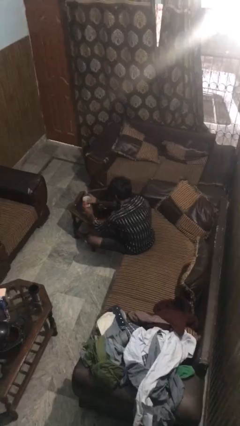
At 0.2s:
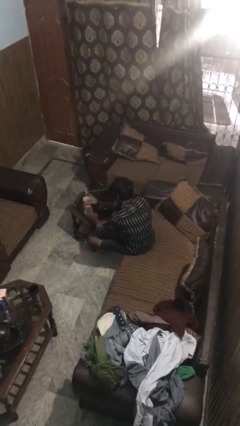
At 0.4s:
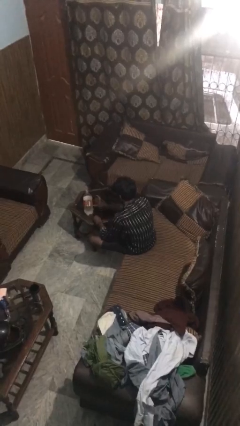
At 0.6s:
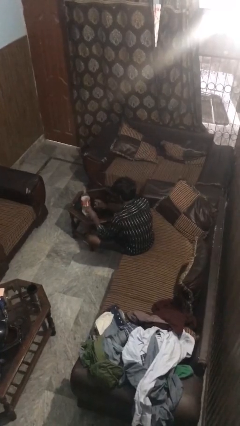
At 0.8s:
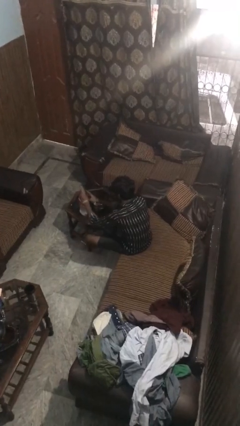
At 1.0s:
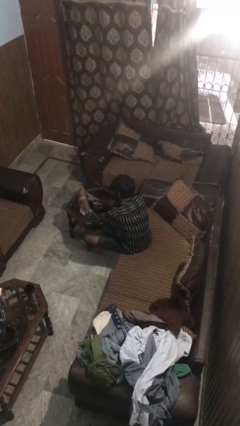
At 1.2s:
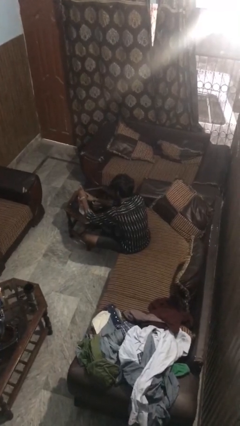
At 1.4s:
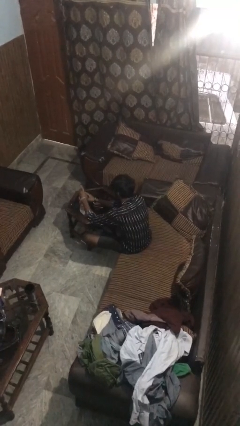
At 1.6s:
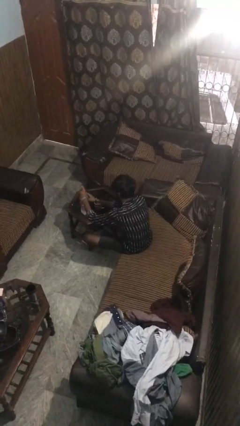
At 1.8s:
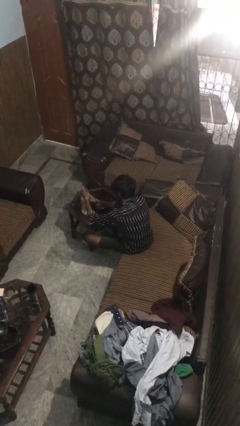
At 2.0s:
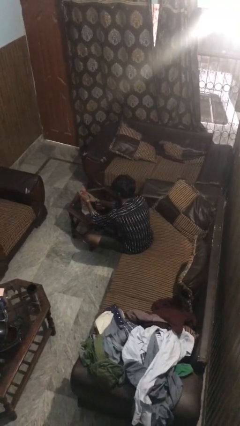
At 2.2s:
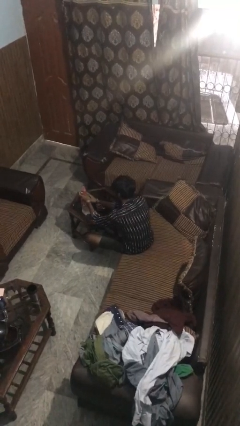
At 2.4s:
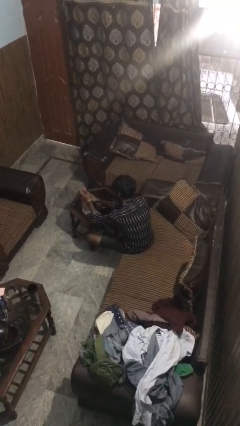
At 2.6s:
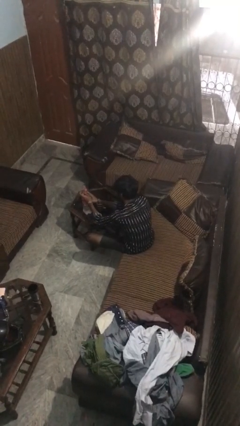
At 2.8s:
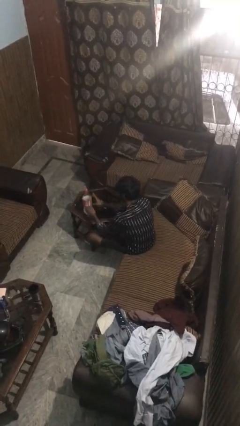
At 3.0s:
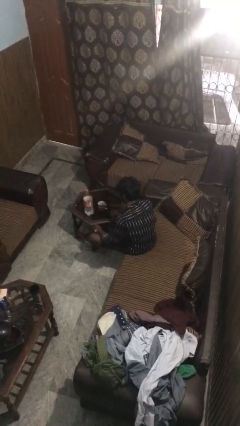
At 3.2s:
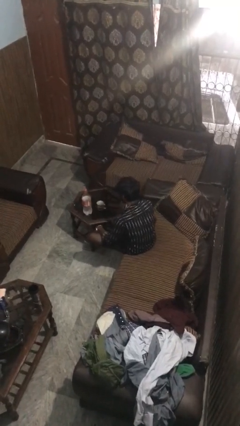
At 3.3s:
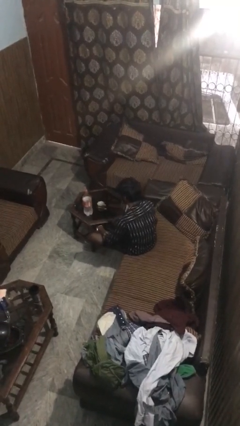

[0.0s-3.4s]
person screws lid to bottle

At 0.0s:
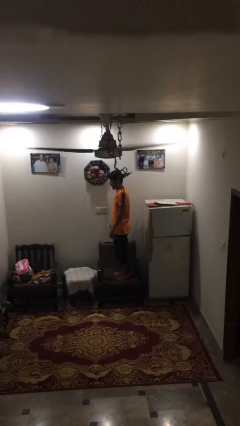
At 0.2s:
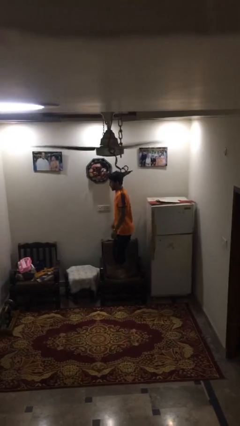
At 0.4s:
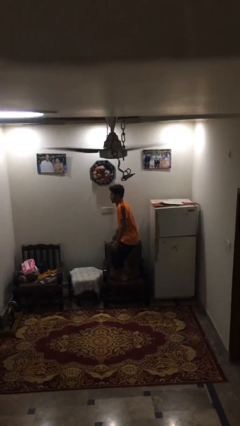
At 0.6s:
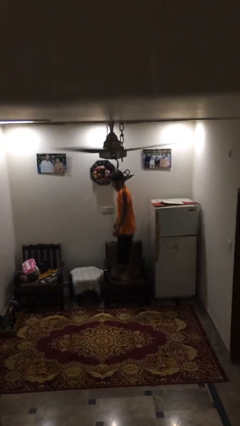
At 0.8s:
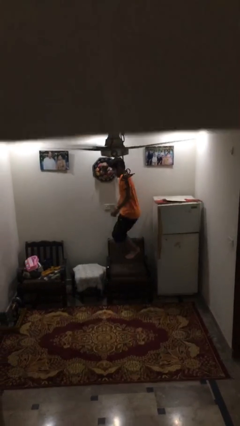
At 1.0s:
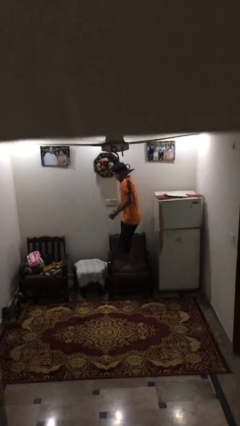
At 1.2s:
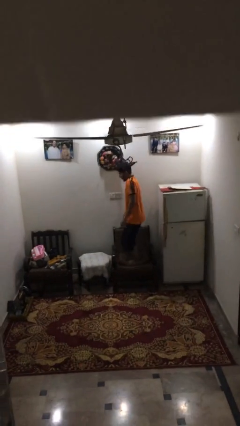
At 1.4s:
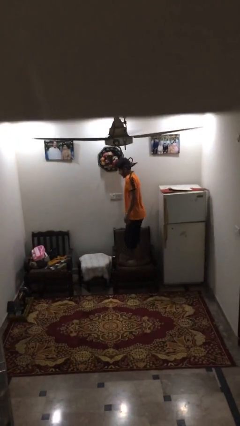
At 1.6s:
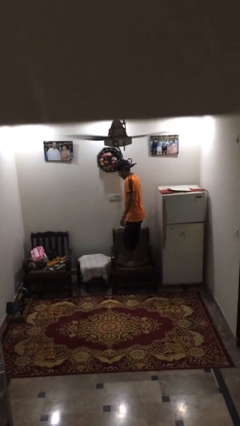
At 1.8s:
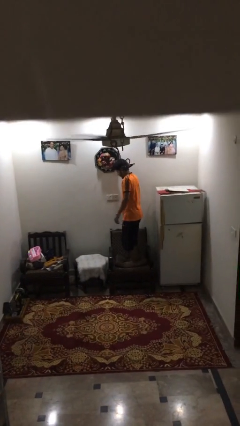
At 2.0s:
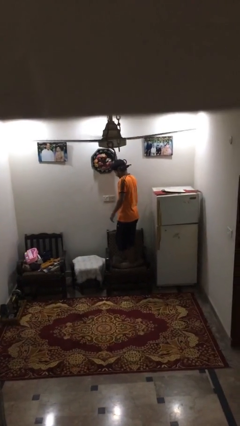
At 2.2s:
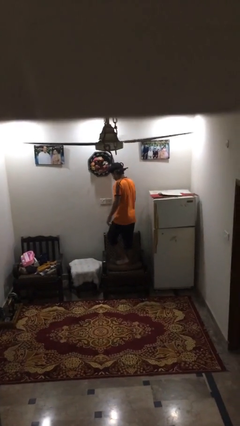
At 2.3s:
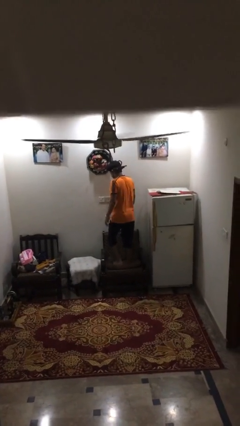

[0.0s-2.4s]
person jumps on couch

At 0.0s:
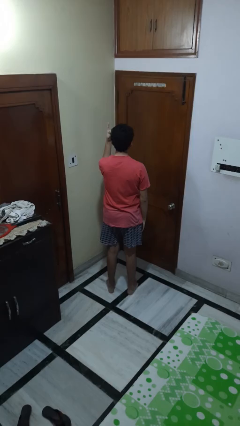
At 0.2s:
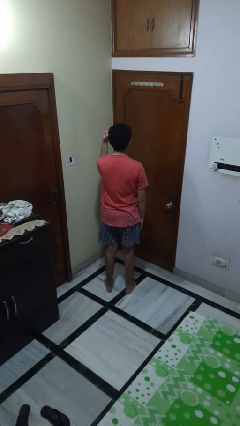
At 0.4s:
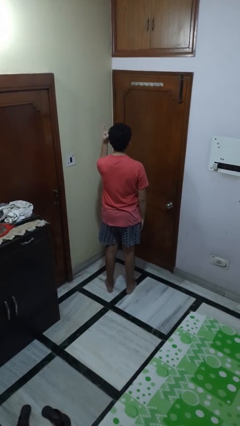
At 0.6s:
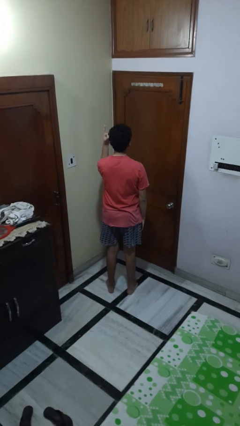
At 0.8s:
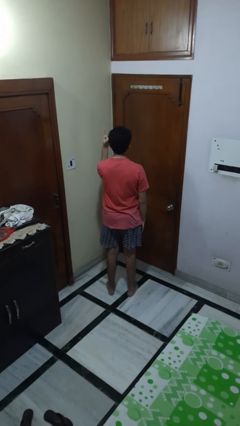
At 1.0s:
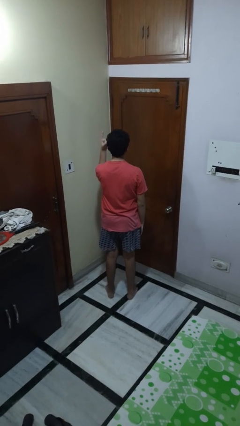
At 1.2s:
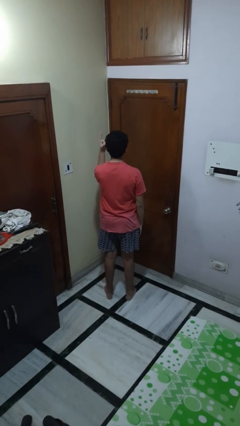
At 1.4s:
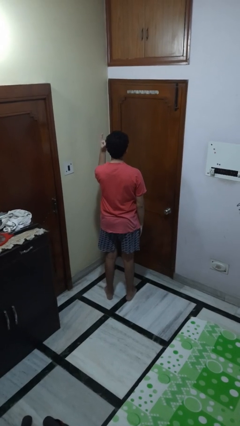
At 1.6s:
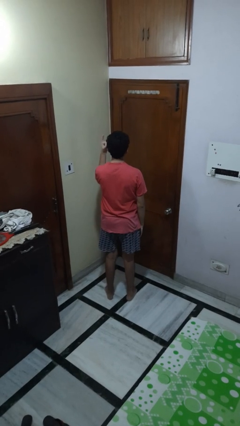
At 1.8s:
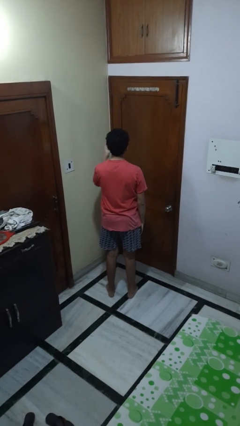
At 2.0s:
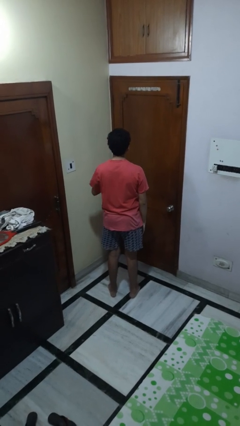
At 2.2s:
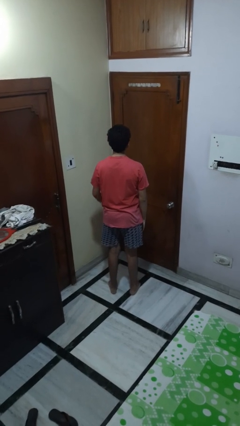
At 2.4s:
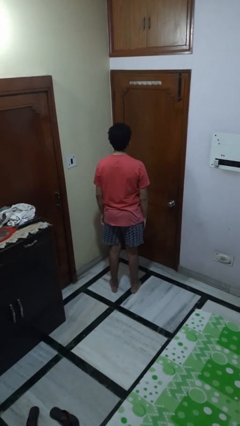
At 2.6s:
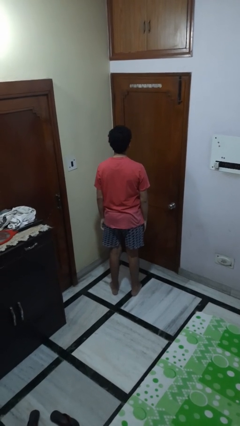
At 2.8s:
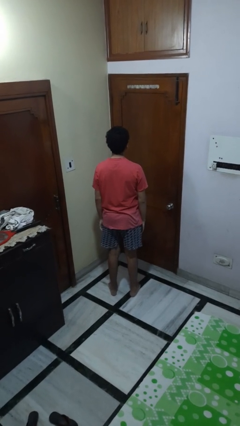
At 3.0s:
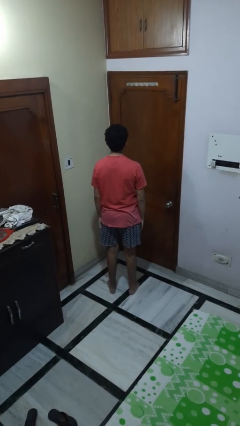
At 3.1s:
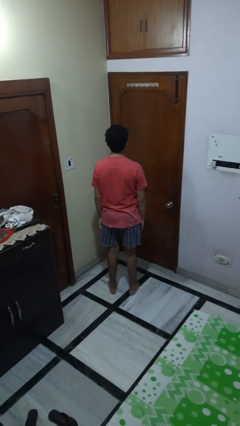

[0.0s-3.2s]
person gestures number one

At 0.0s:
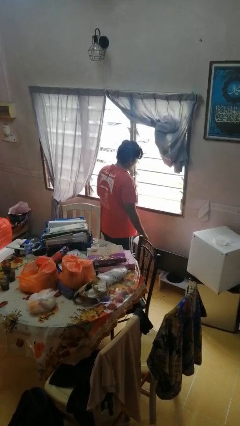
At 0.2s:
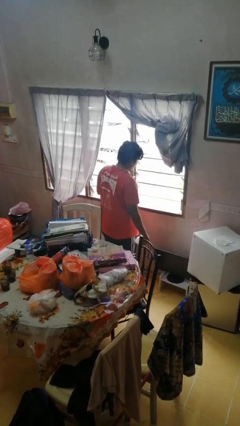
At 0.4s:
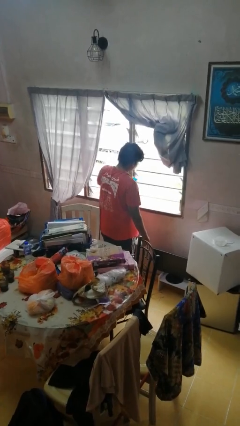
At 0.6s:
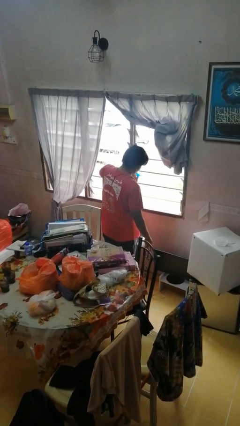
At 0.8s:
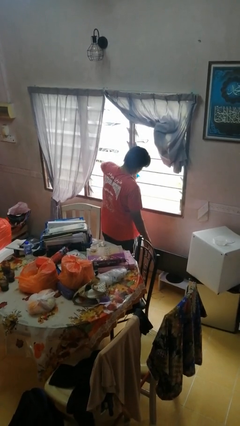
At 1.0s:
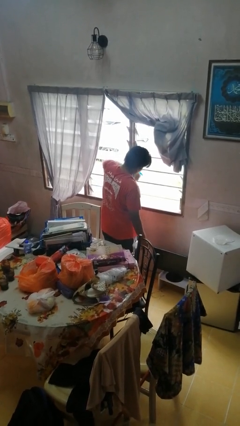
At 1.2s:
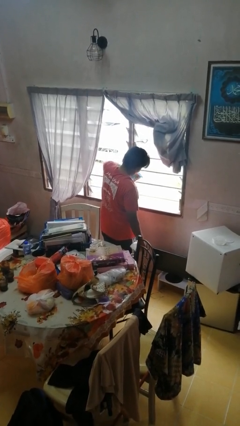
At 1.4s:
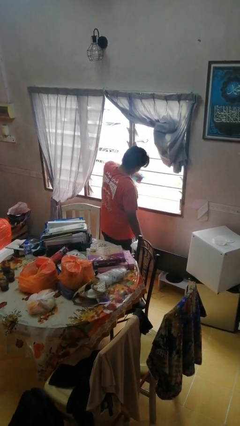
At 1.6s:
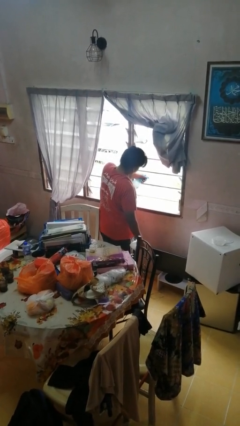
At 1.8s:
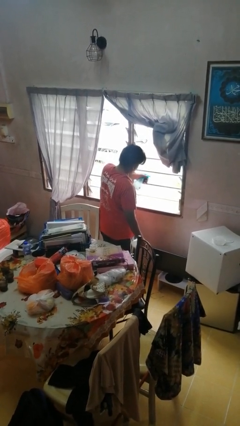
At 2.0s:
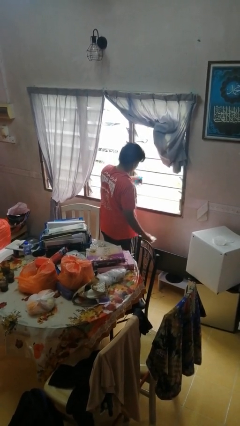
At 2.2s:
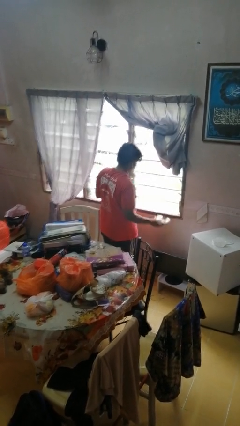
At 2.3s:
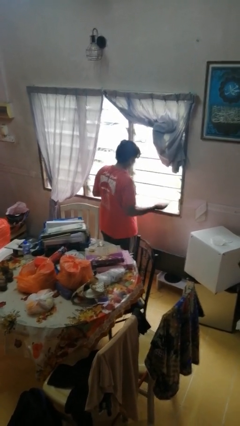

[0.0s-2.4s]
person sprays from bottle

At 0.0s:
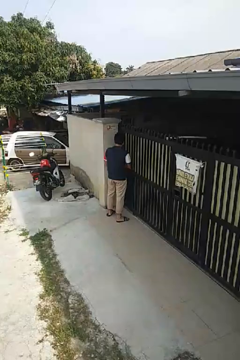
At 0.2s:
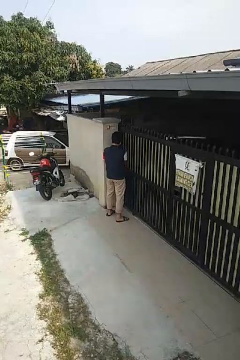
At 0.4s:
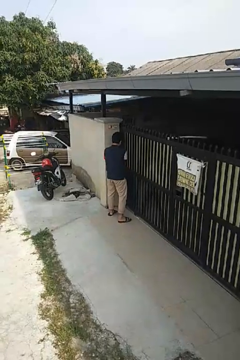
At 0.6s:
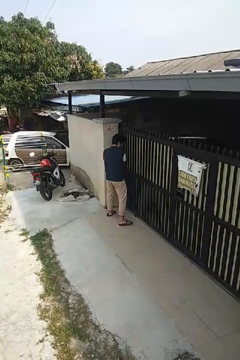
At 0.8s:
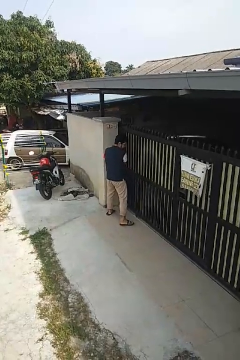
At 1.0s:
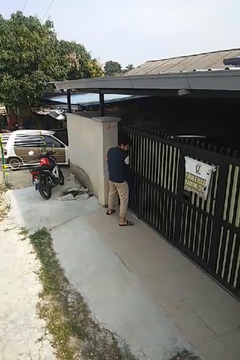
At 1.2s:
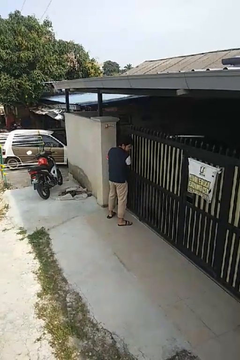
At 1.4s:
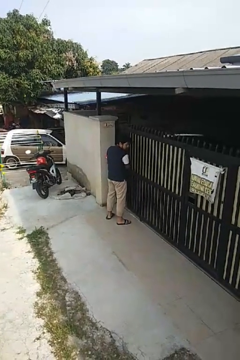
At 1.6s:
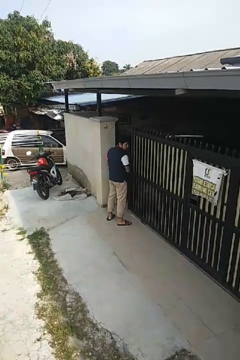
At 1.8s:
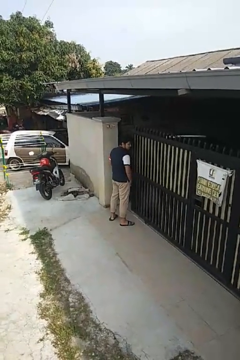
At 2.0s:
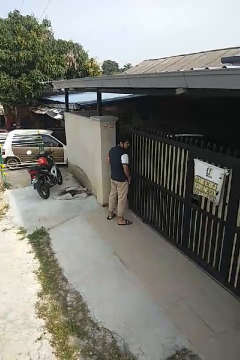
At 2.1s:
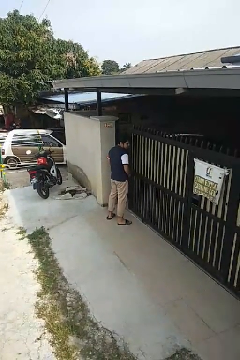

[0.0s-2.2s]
person opens sliding door

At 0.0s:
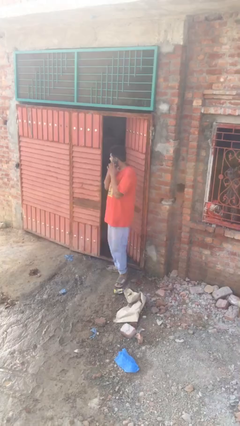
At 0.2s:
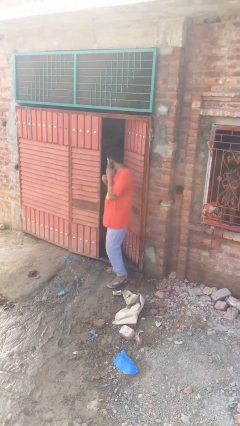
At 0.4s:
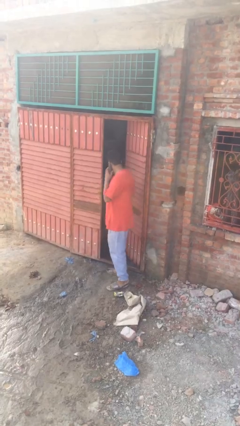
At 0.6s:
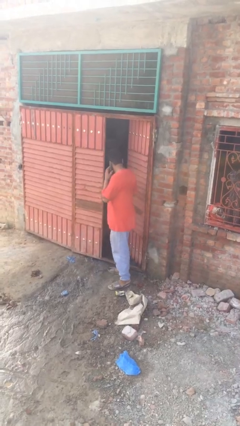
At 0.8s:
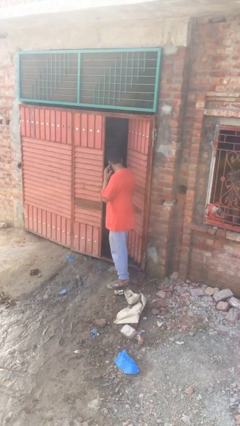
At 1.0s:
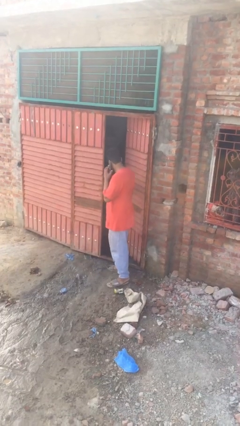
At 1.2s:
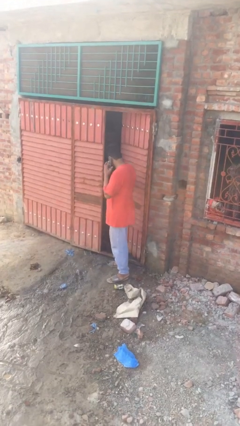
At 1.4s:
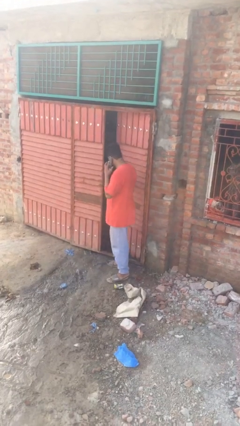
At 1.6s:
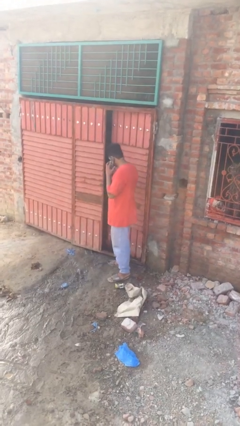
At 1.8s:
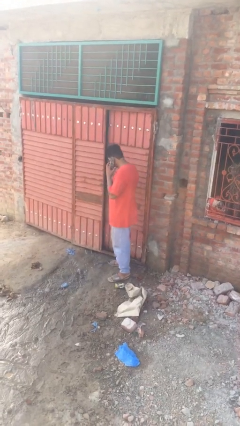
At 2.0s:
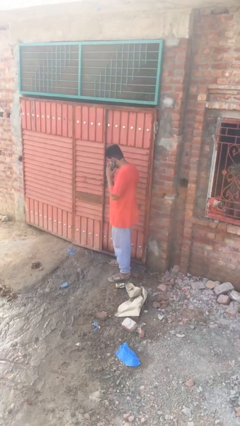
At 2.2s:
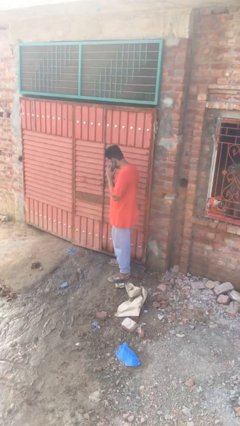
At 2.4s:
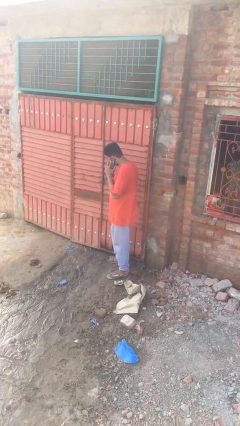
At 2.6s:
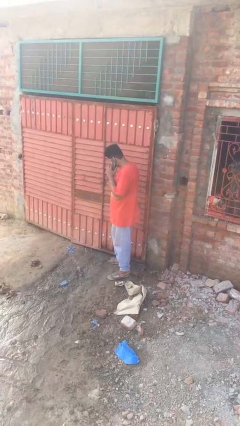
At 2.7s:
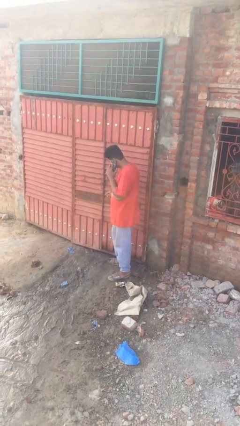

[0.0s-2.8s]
person closes facility door

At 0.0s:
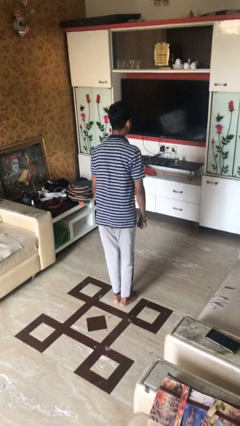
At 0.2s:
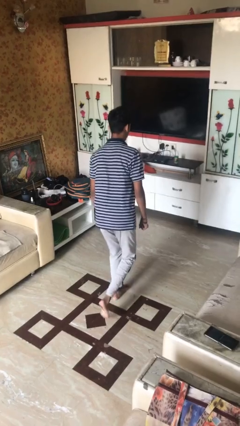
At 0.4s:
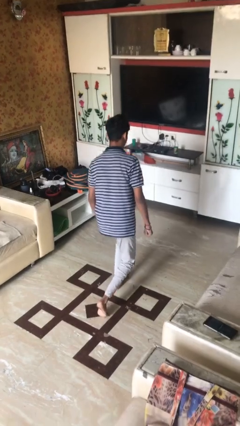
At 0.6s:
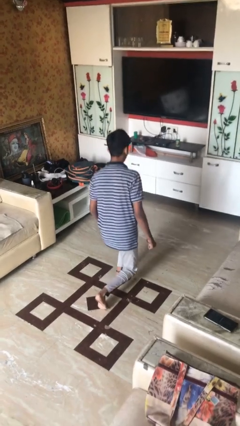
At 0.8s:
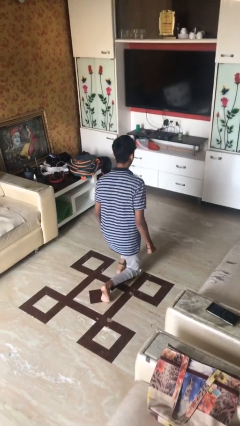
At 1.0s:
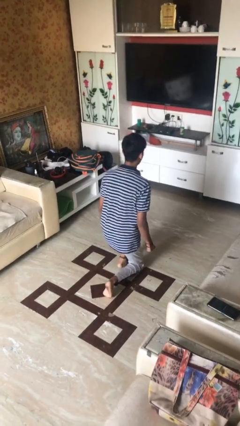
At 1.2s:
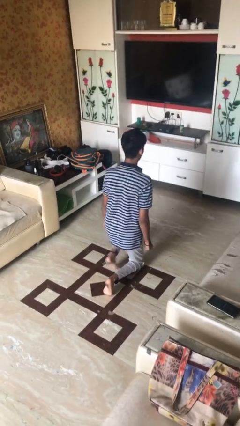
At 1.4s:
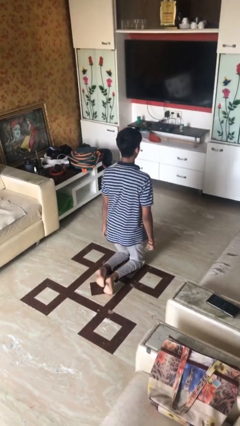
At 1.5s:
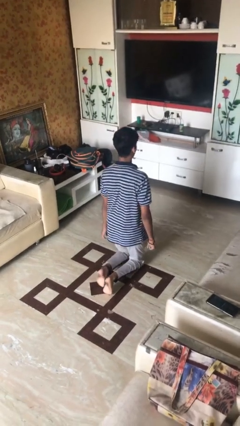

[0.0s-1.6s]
person kneels
